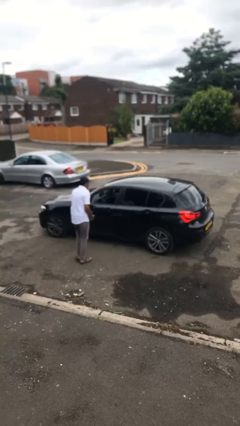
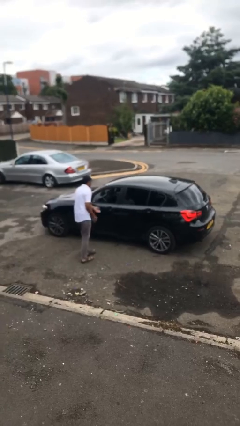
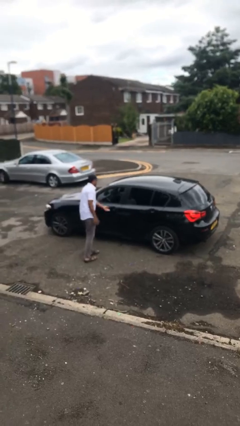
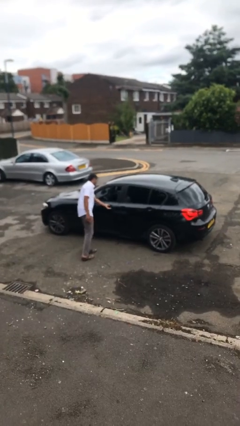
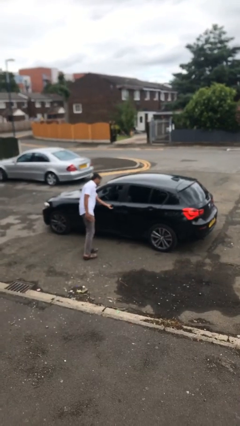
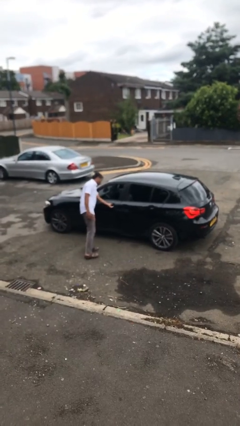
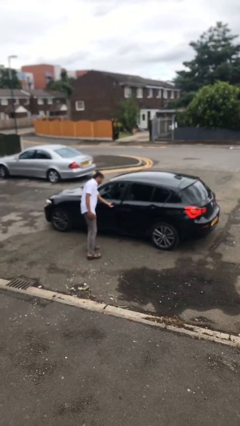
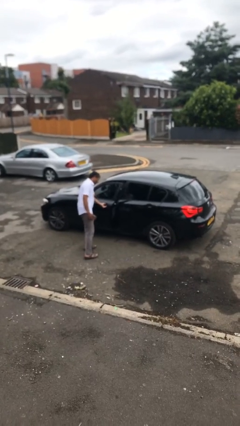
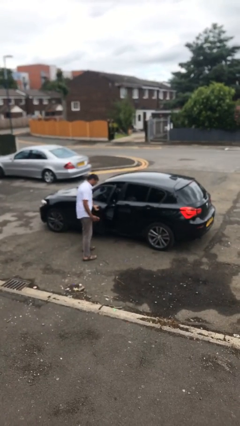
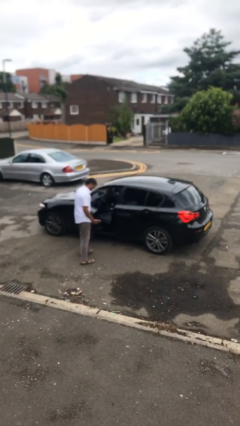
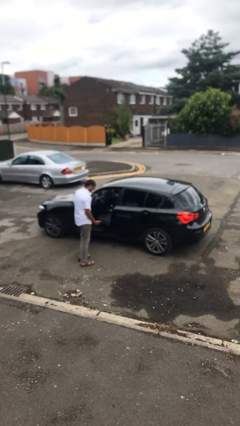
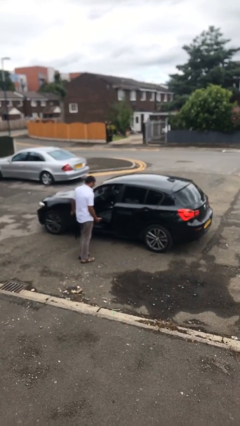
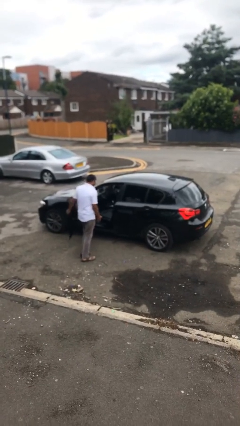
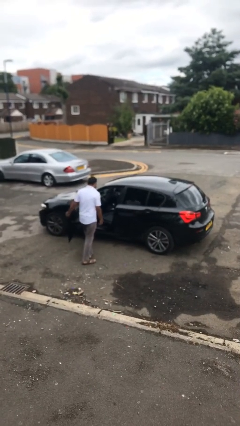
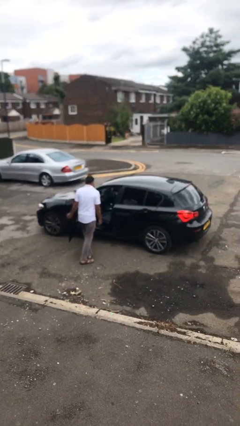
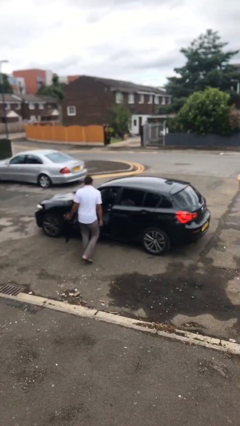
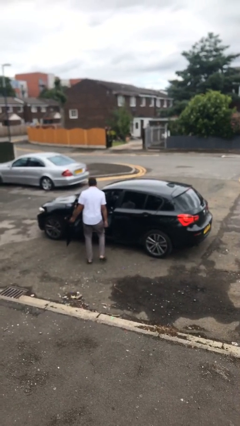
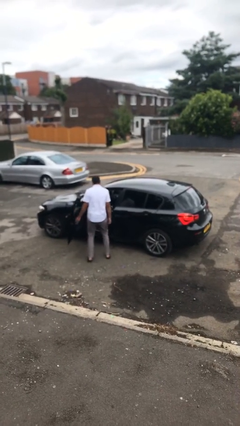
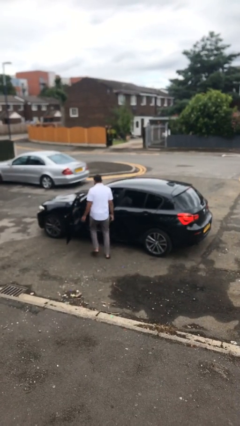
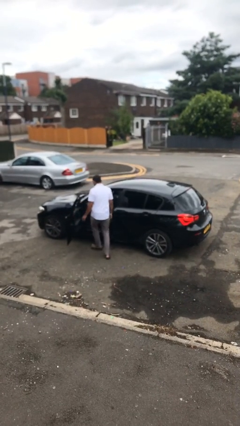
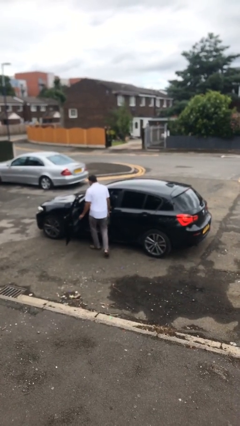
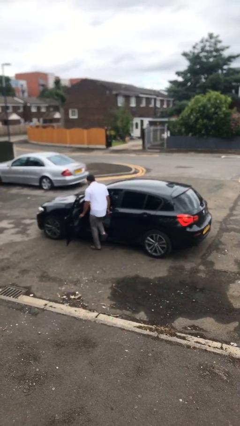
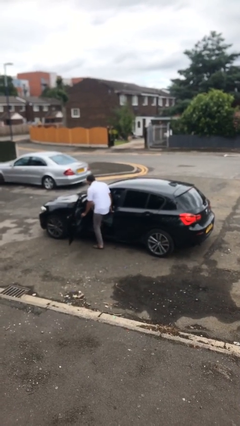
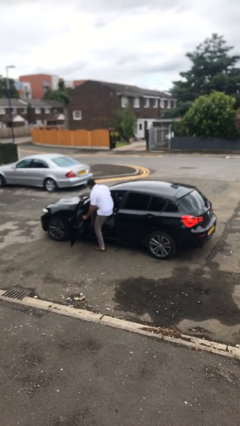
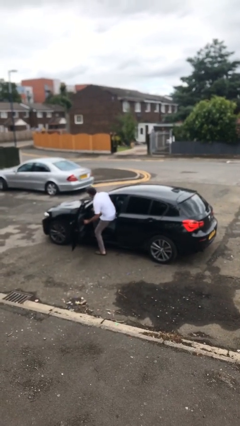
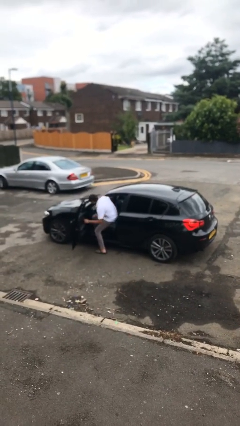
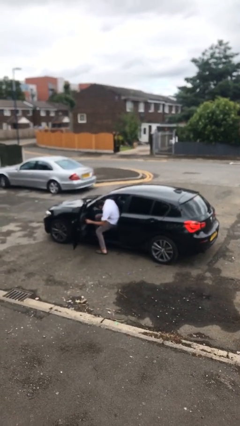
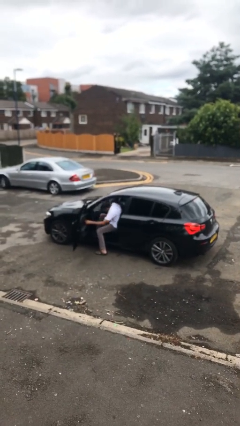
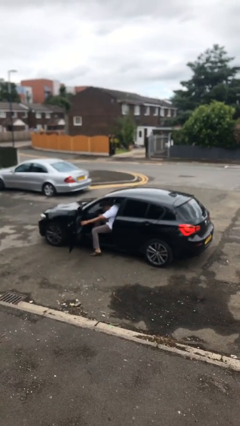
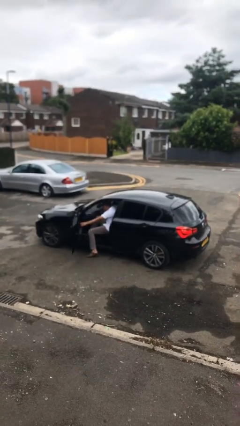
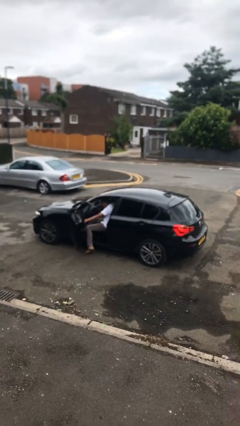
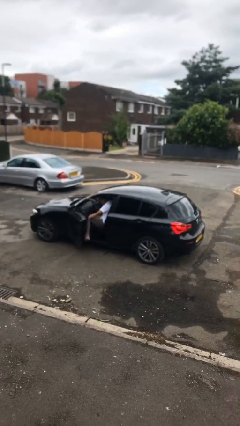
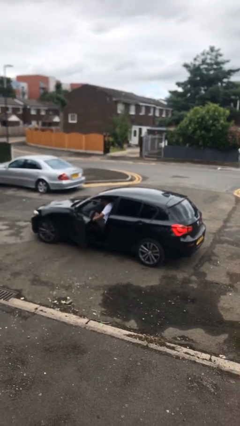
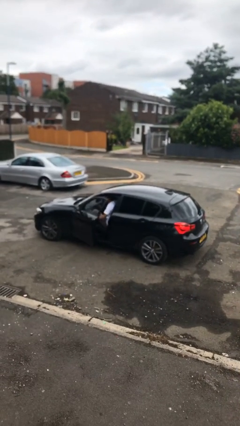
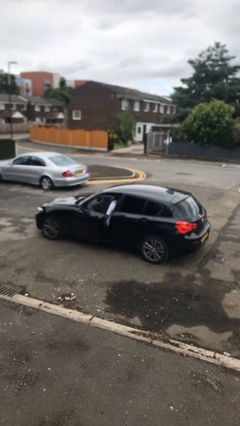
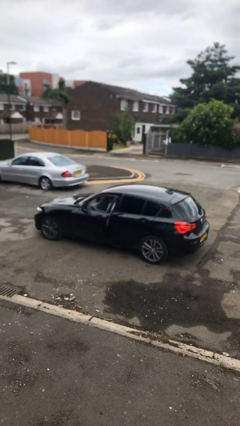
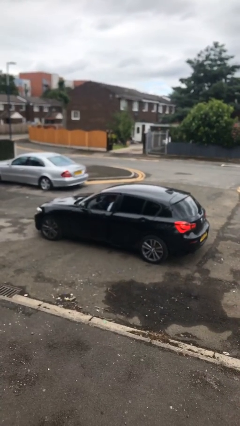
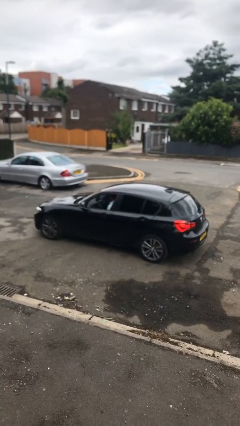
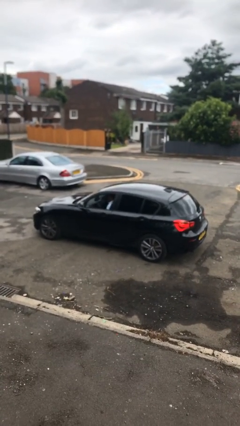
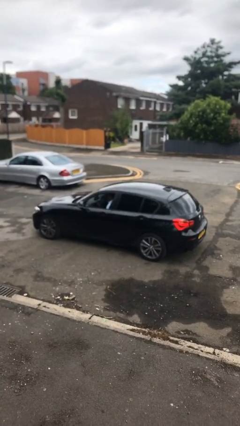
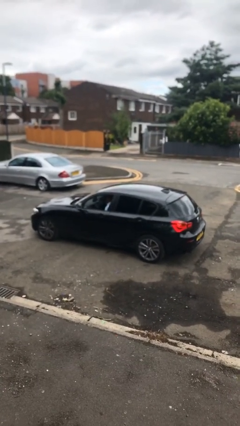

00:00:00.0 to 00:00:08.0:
car picks up person

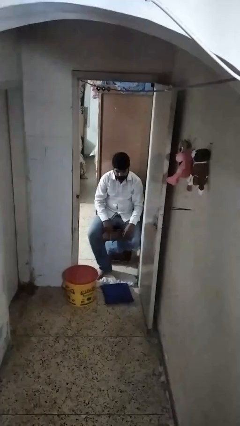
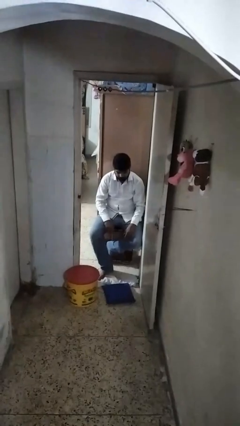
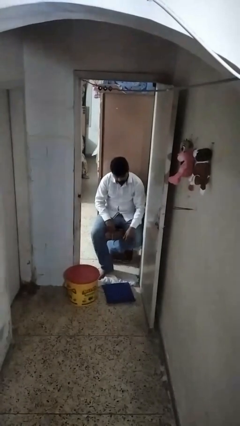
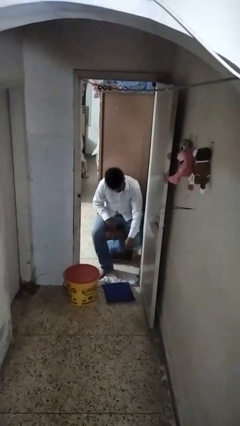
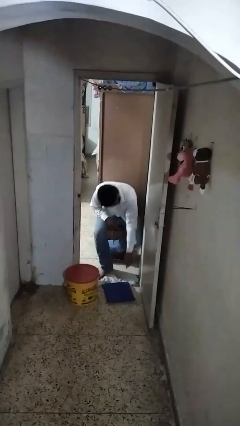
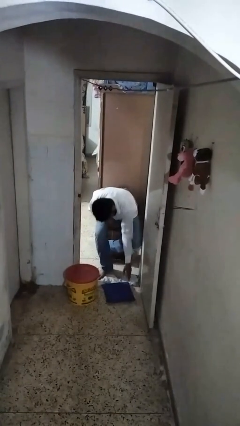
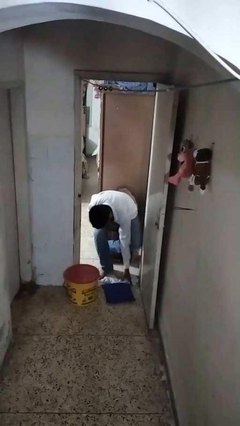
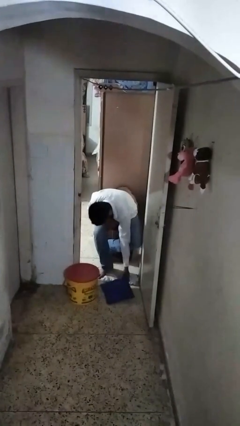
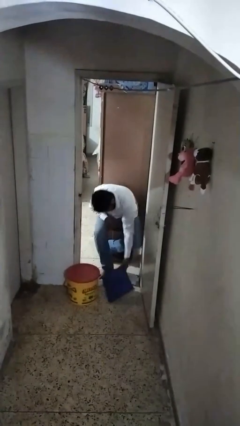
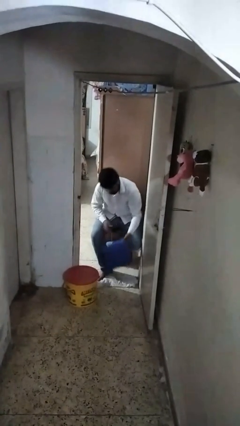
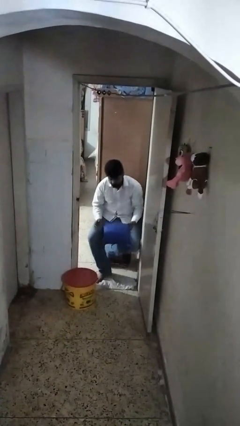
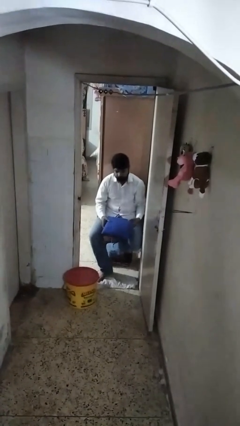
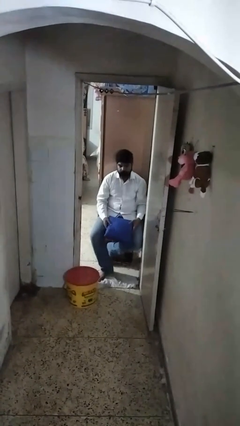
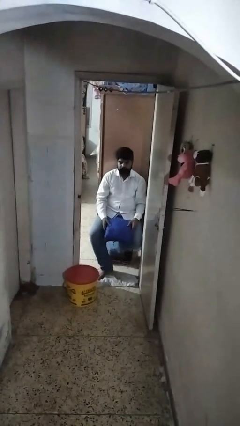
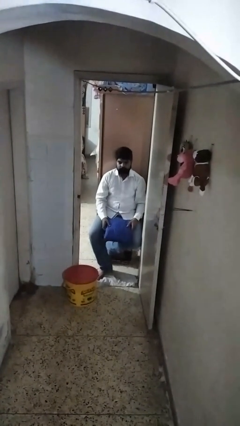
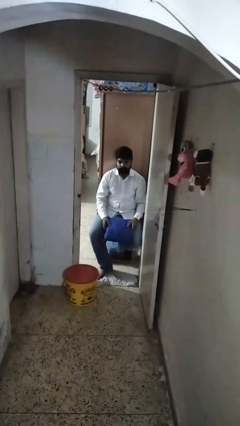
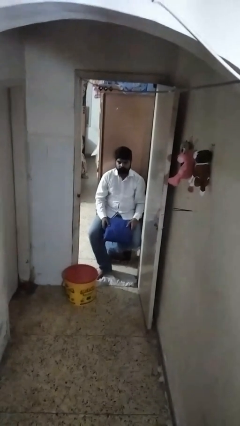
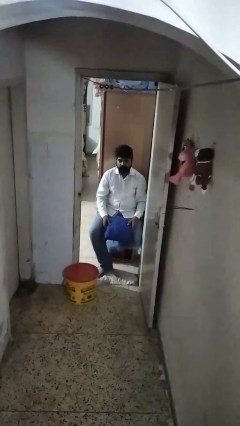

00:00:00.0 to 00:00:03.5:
person picks up object from floor

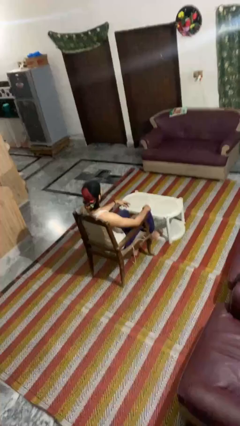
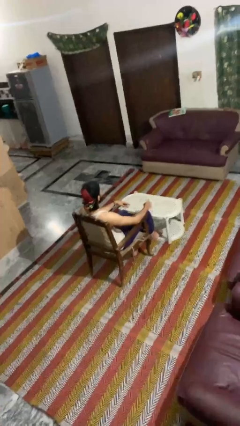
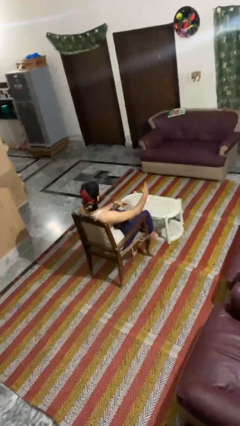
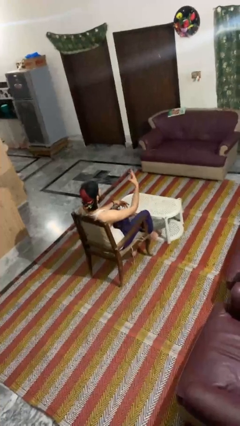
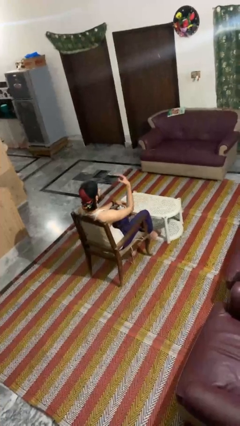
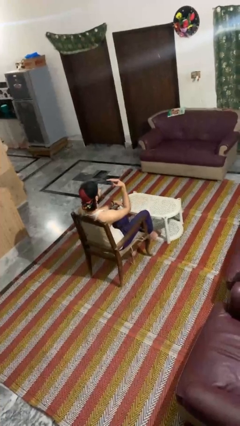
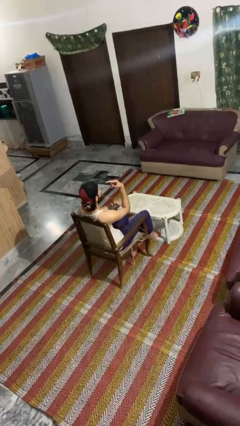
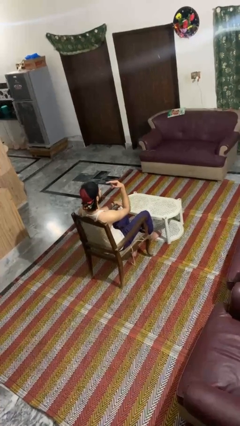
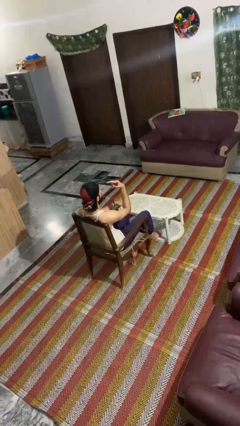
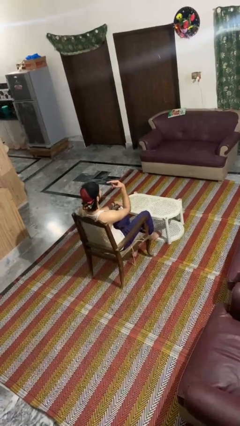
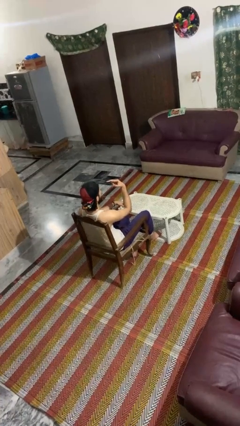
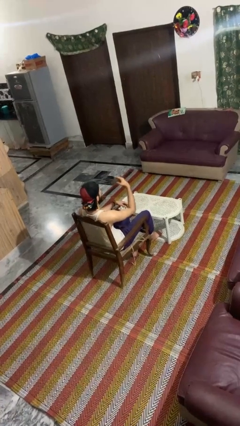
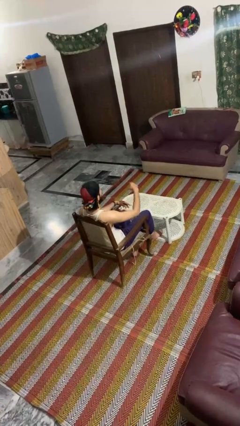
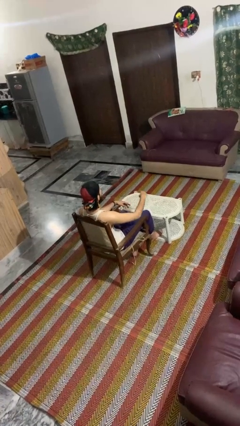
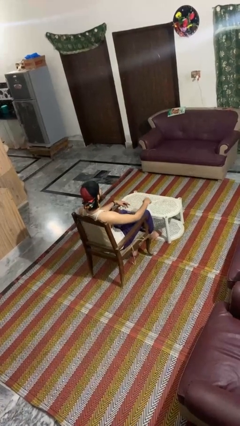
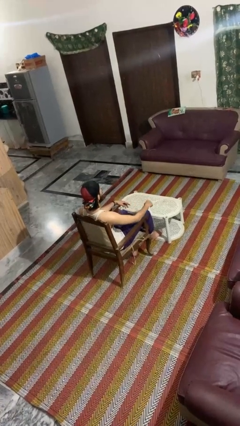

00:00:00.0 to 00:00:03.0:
person gestures watch closely

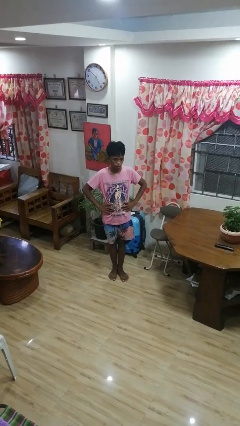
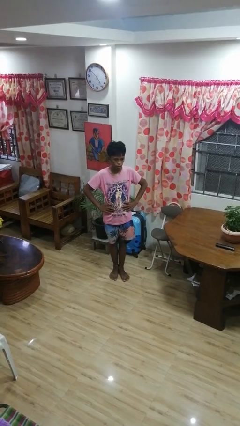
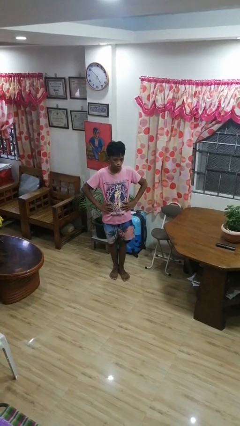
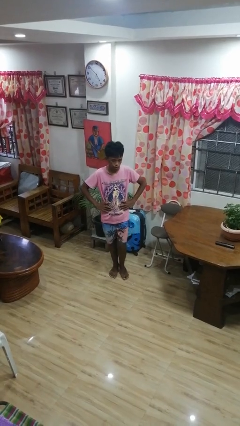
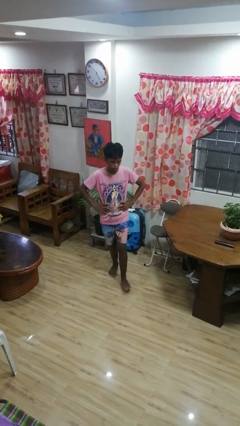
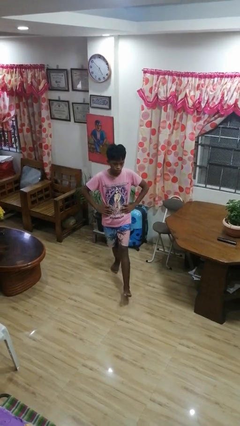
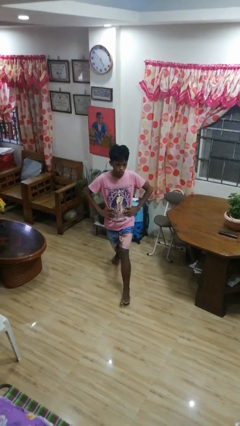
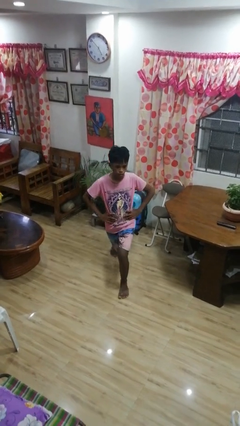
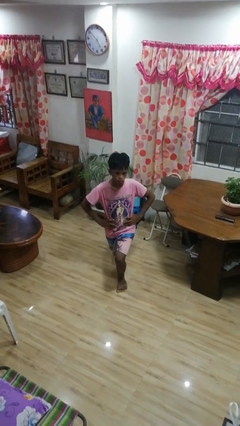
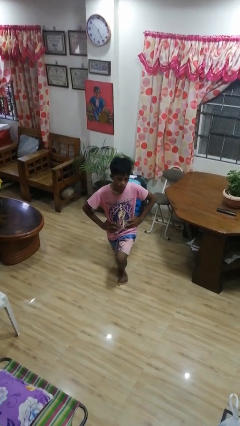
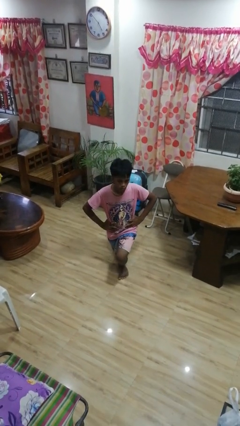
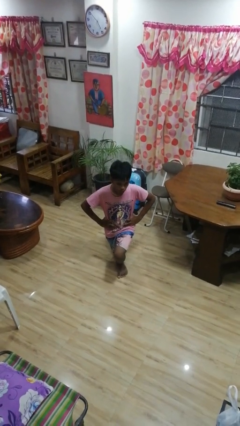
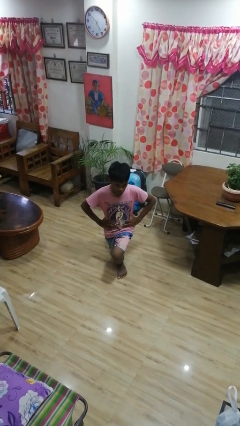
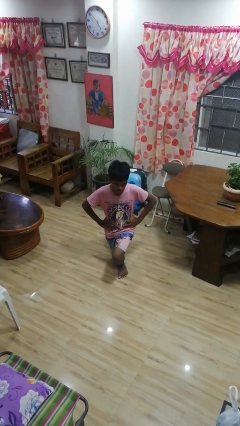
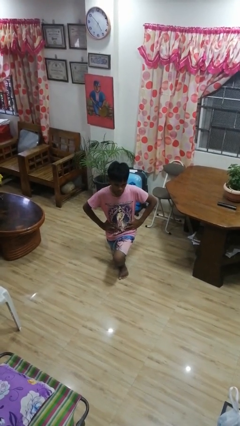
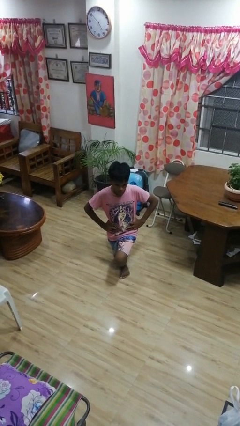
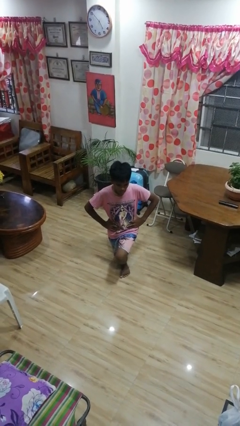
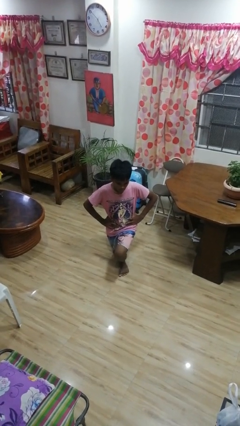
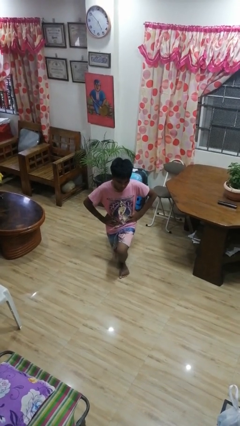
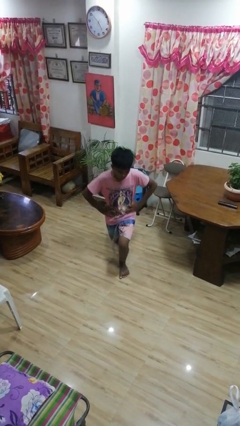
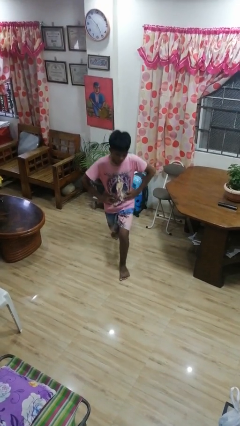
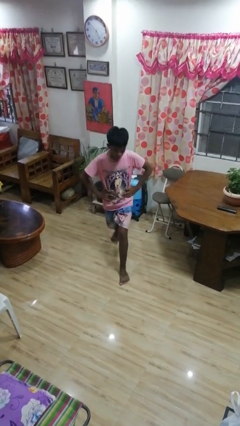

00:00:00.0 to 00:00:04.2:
person exercises with lunges
